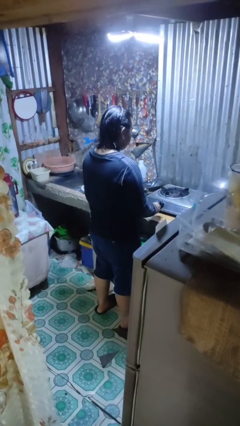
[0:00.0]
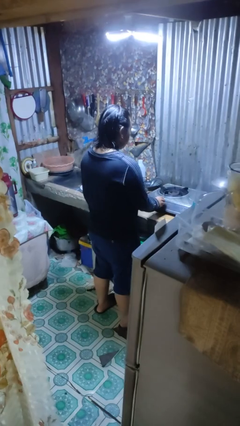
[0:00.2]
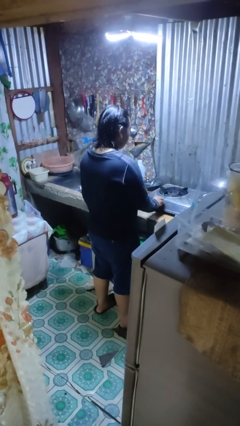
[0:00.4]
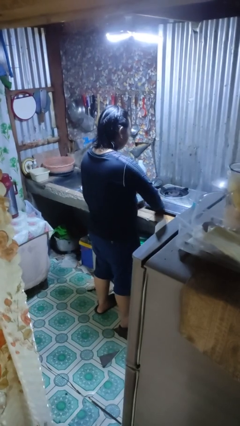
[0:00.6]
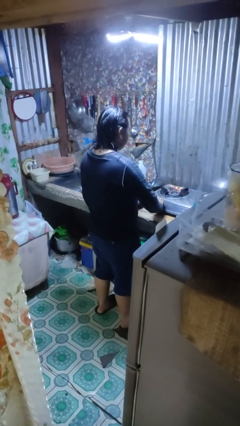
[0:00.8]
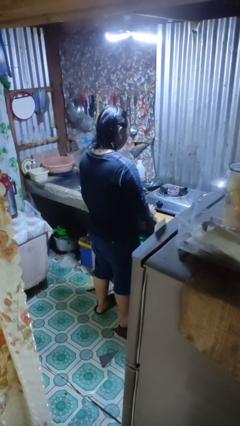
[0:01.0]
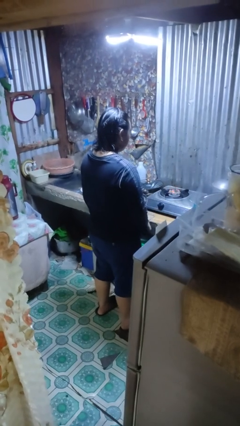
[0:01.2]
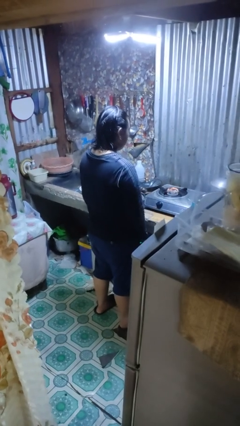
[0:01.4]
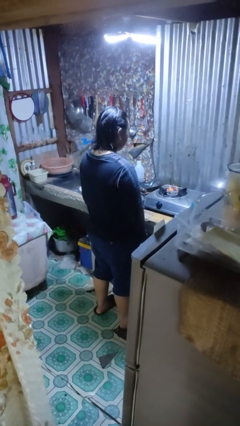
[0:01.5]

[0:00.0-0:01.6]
person turns on stovetop

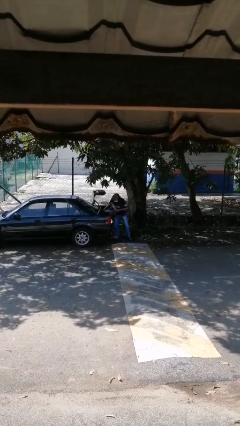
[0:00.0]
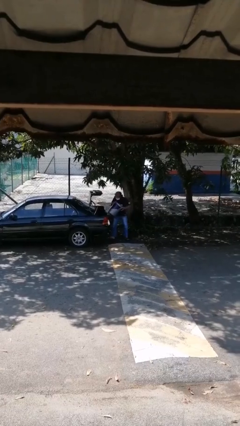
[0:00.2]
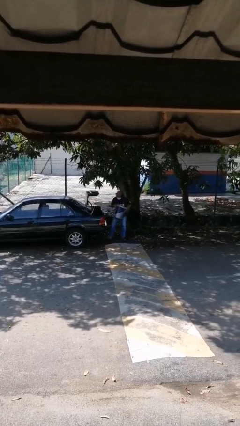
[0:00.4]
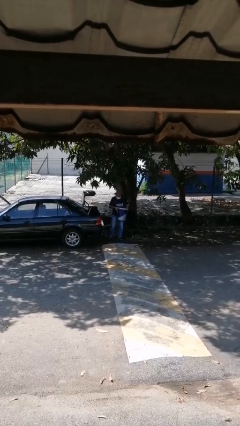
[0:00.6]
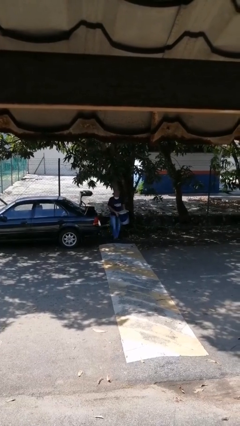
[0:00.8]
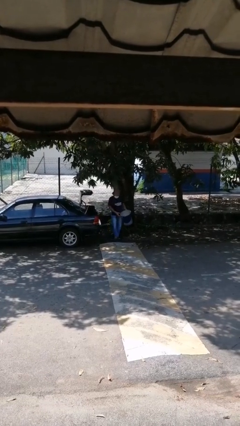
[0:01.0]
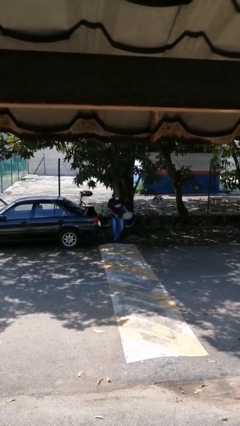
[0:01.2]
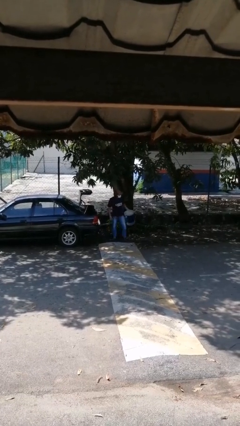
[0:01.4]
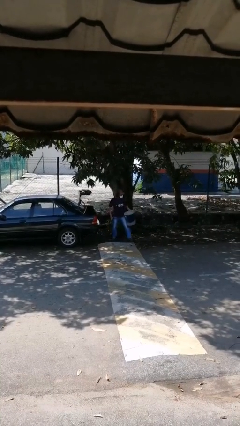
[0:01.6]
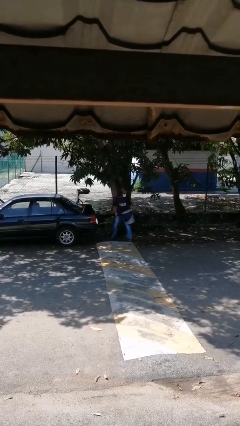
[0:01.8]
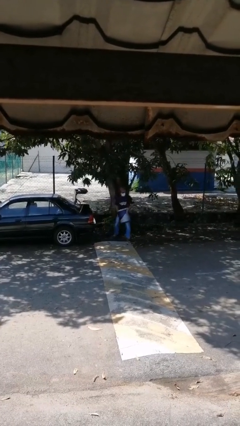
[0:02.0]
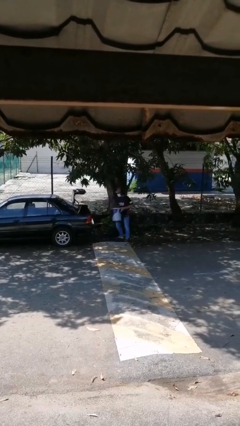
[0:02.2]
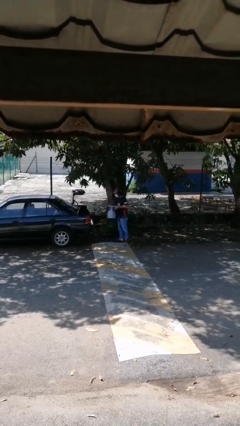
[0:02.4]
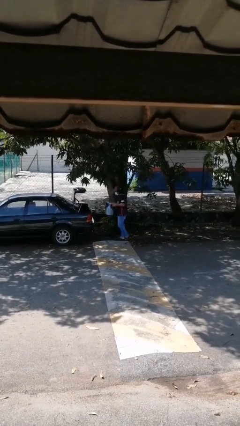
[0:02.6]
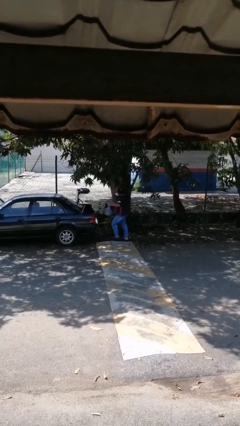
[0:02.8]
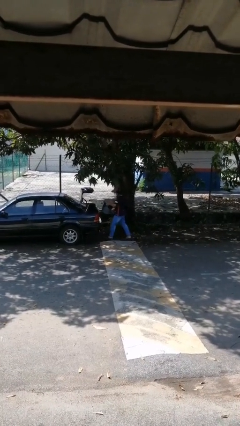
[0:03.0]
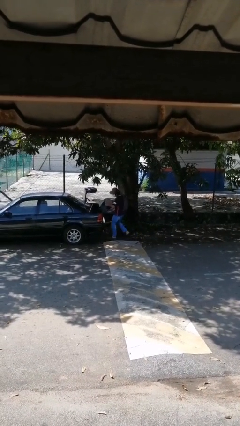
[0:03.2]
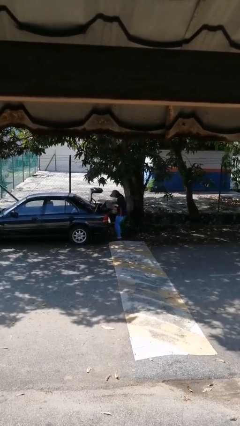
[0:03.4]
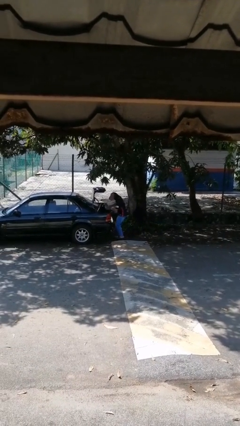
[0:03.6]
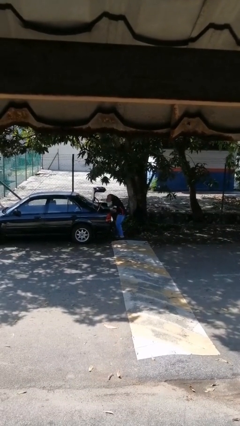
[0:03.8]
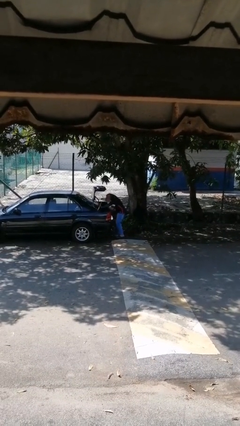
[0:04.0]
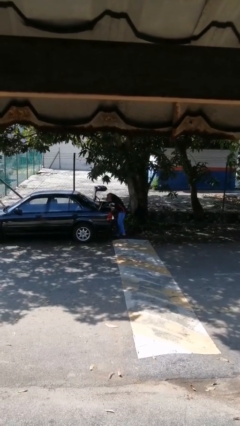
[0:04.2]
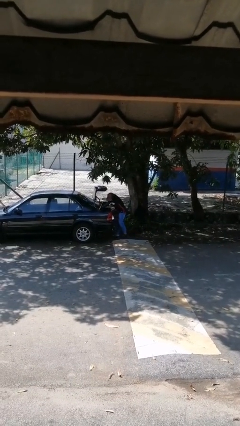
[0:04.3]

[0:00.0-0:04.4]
person unloads car

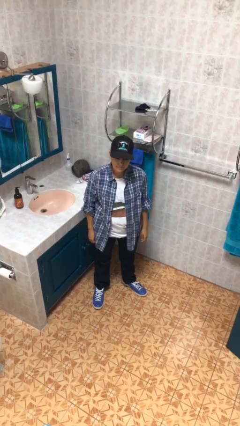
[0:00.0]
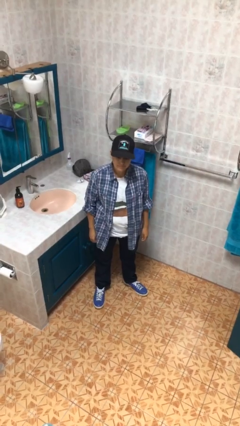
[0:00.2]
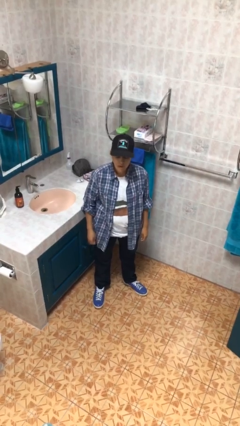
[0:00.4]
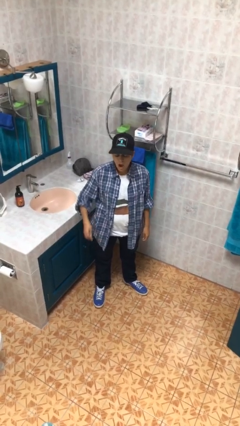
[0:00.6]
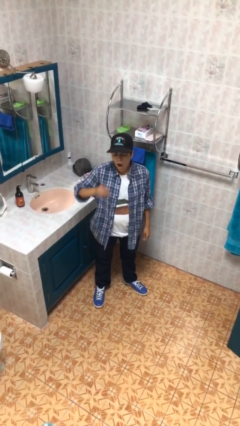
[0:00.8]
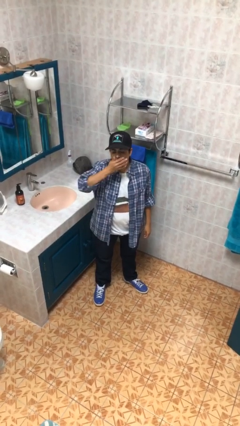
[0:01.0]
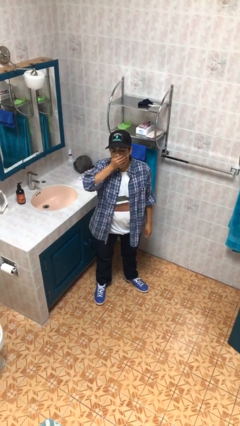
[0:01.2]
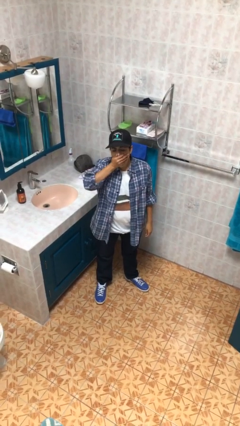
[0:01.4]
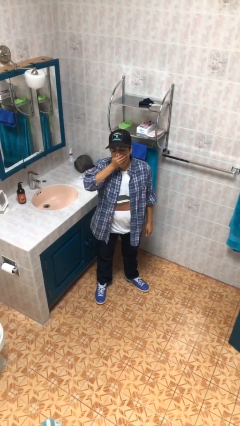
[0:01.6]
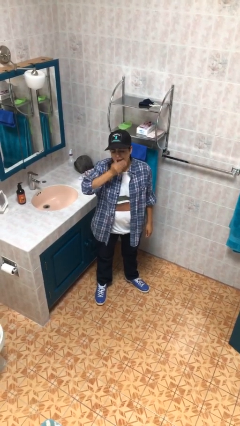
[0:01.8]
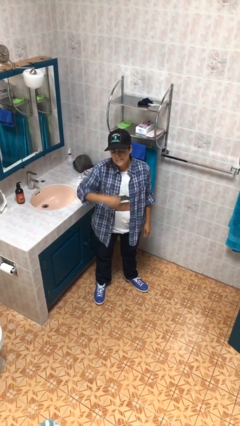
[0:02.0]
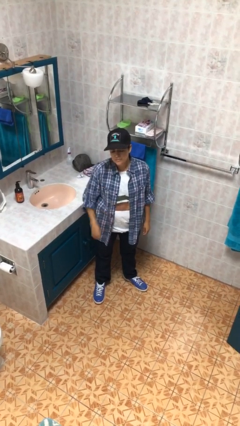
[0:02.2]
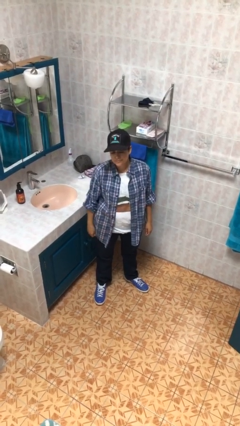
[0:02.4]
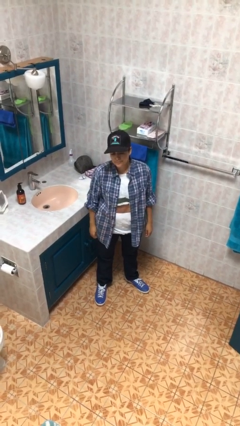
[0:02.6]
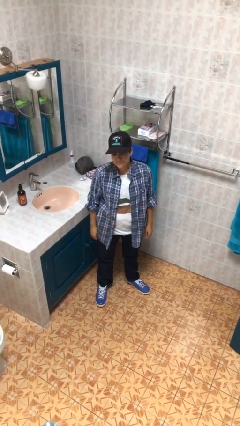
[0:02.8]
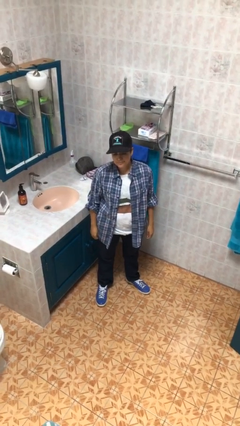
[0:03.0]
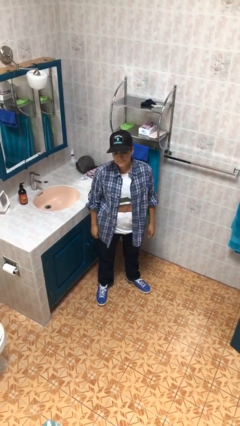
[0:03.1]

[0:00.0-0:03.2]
person yawns

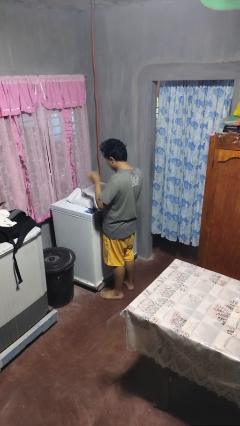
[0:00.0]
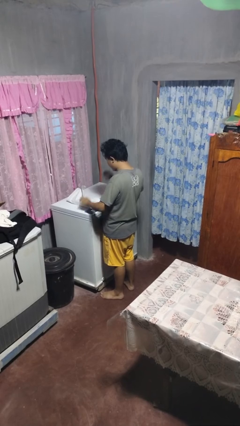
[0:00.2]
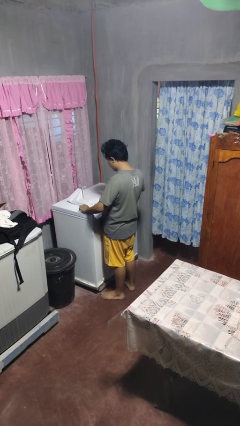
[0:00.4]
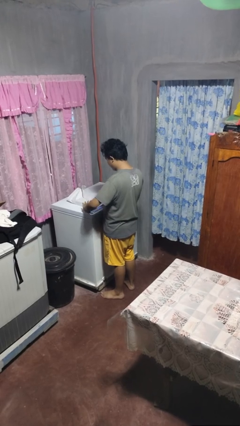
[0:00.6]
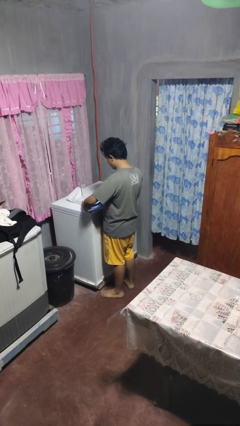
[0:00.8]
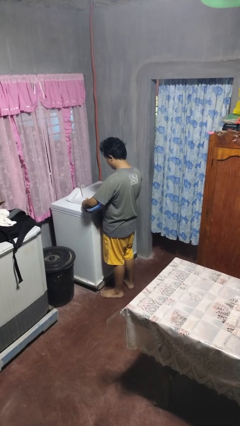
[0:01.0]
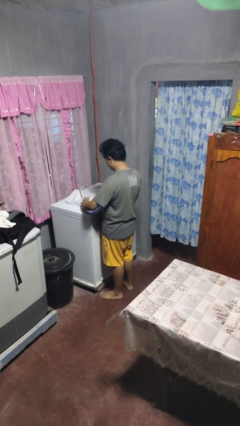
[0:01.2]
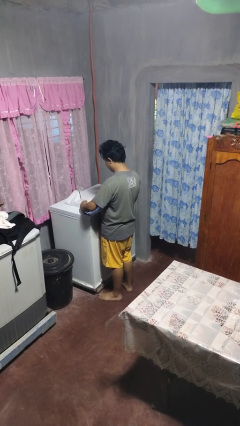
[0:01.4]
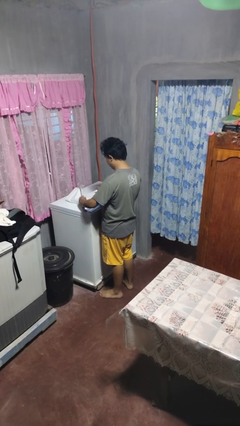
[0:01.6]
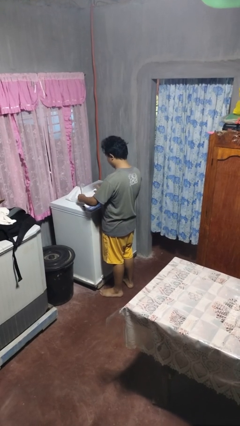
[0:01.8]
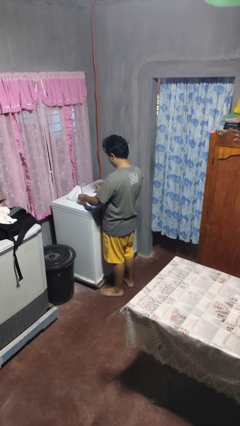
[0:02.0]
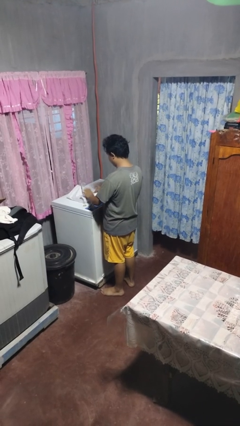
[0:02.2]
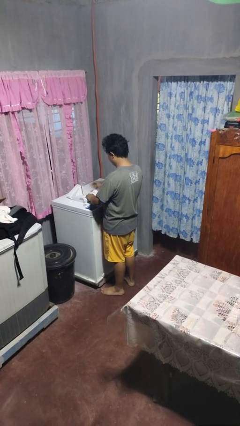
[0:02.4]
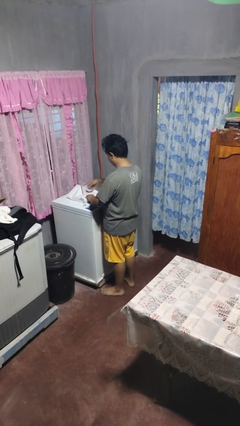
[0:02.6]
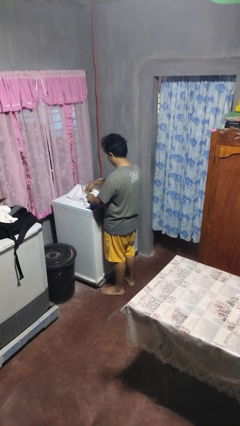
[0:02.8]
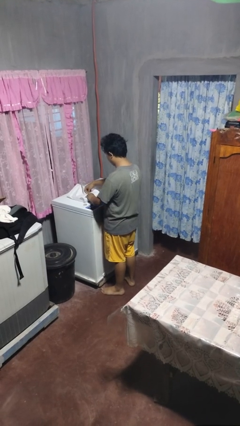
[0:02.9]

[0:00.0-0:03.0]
person wraps box

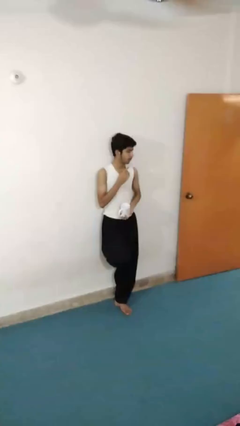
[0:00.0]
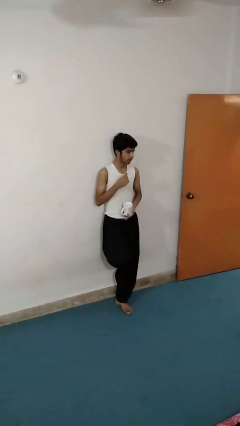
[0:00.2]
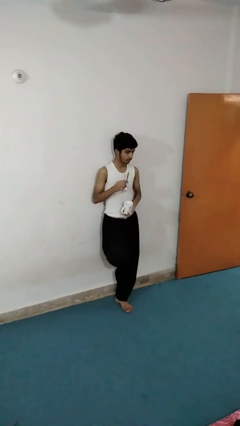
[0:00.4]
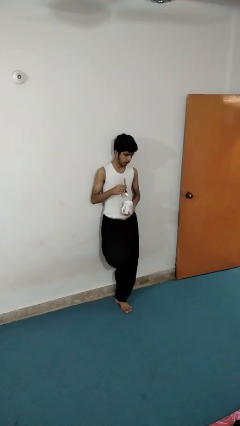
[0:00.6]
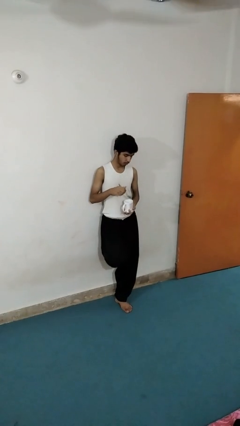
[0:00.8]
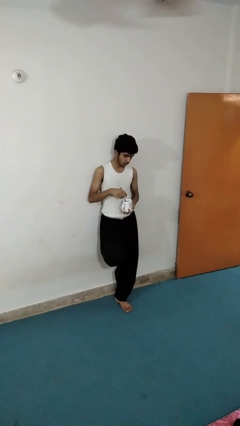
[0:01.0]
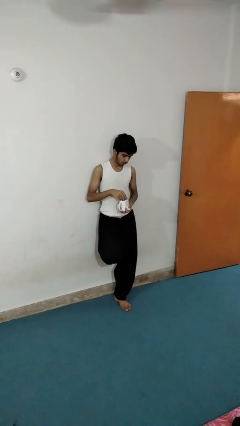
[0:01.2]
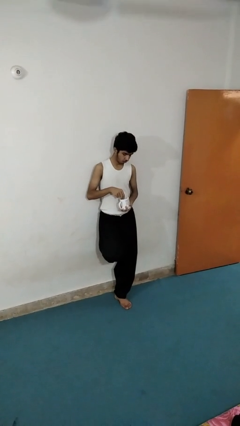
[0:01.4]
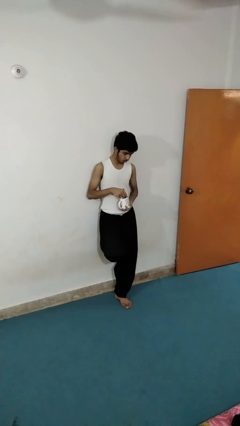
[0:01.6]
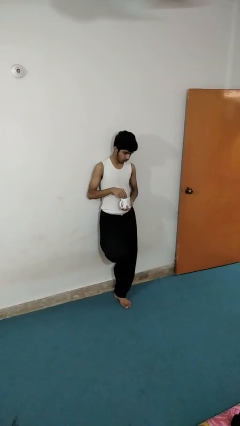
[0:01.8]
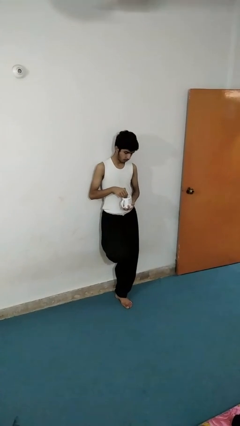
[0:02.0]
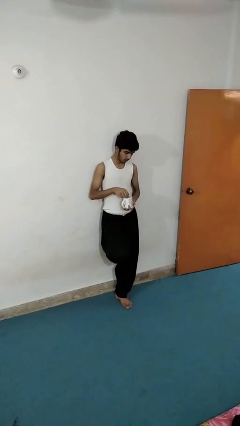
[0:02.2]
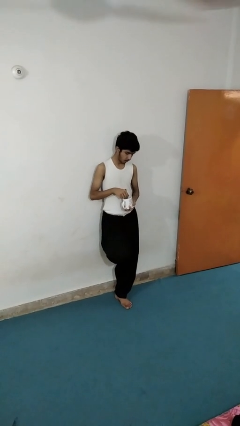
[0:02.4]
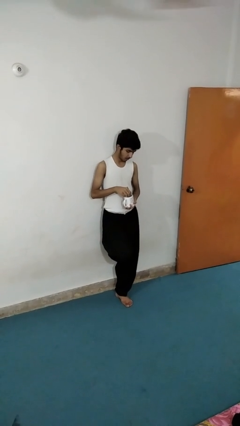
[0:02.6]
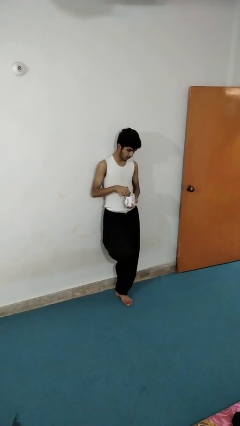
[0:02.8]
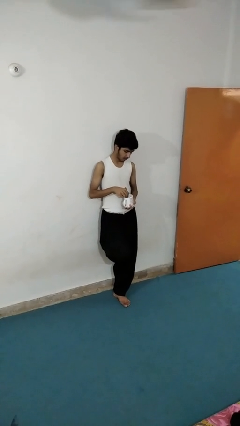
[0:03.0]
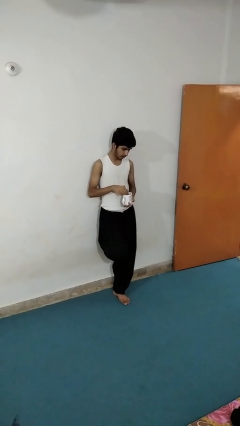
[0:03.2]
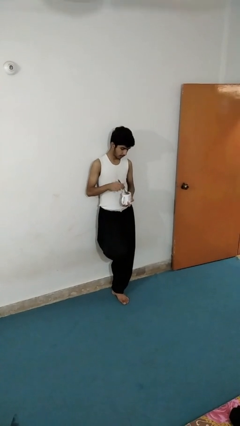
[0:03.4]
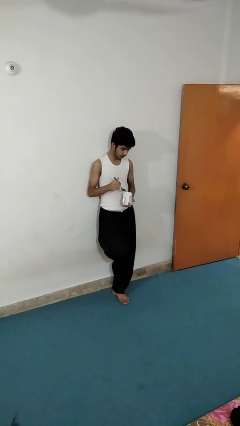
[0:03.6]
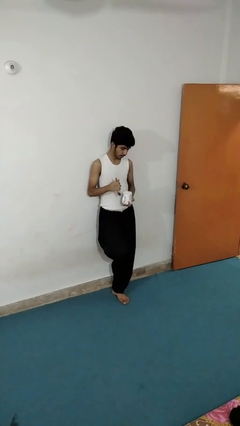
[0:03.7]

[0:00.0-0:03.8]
person stirs mug

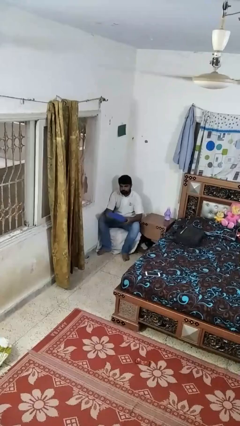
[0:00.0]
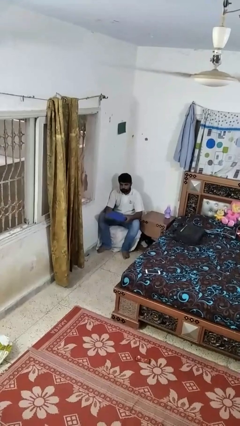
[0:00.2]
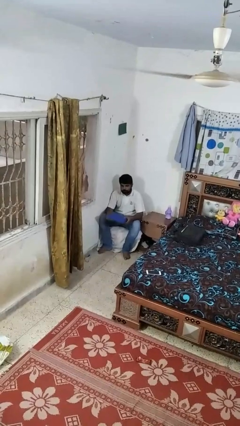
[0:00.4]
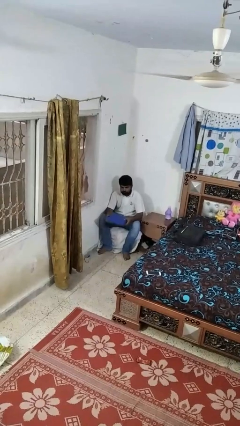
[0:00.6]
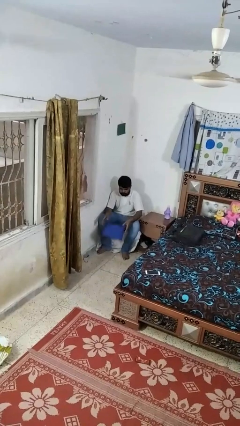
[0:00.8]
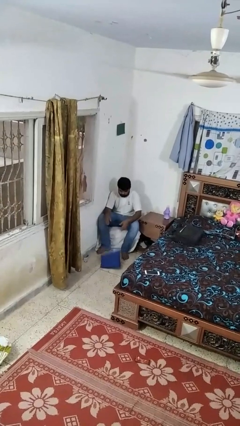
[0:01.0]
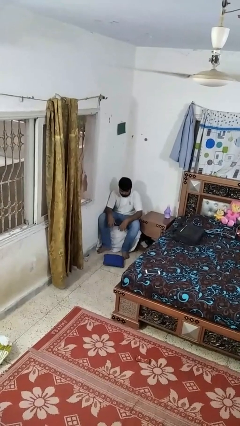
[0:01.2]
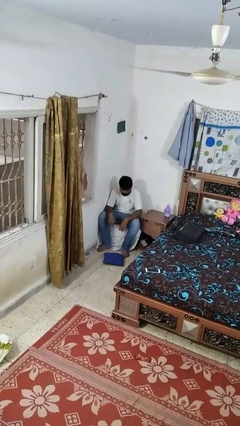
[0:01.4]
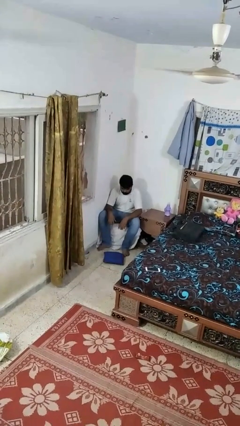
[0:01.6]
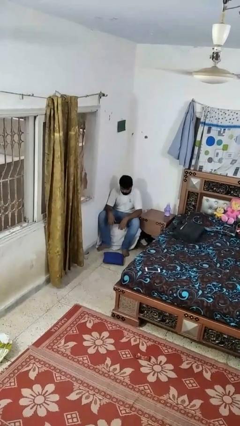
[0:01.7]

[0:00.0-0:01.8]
person drops object
